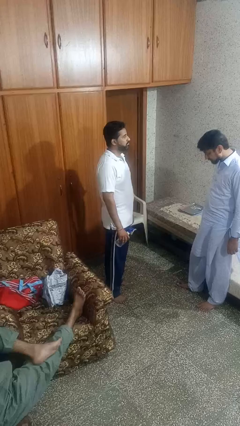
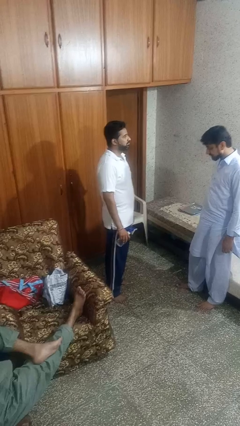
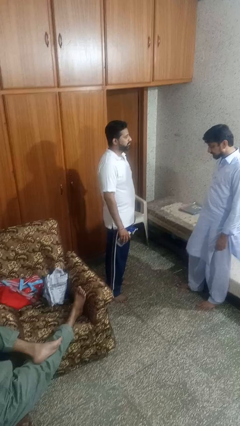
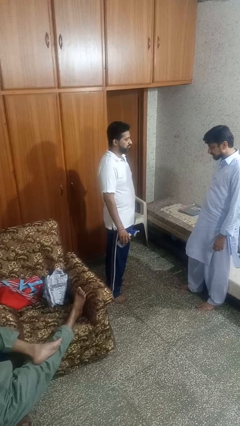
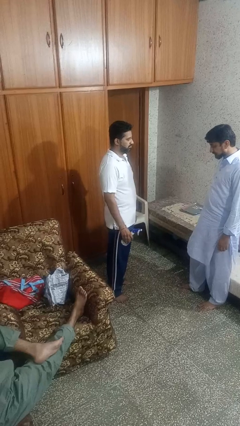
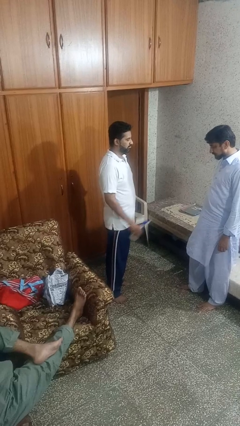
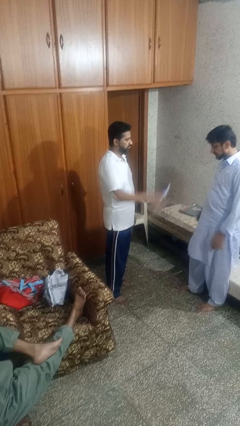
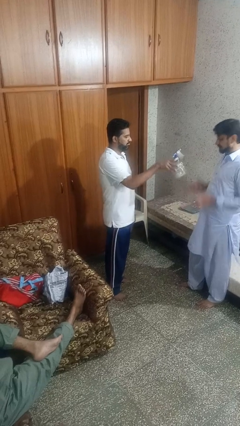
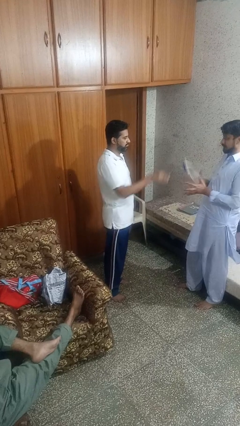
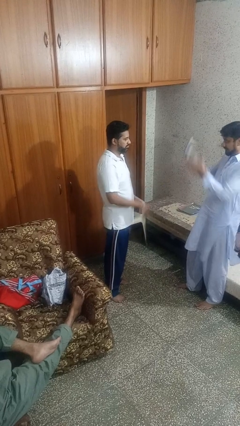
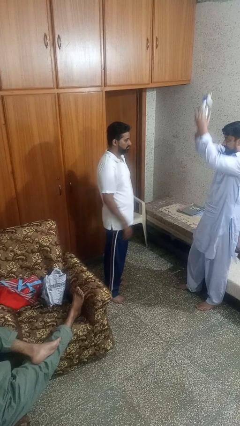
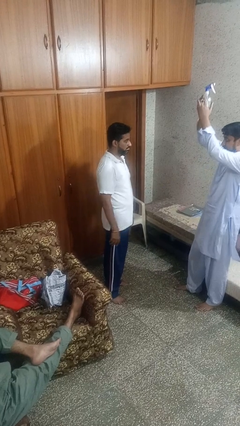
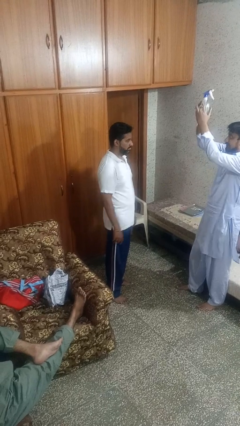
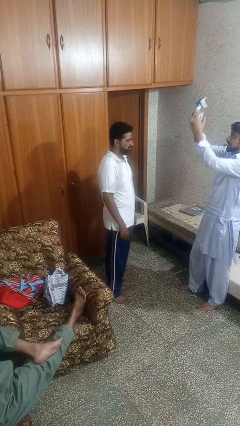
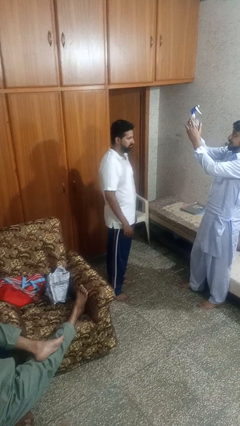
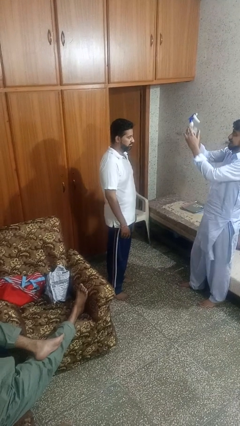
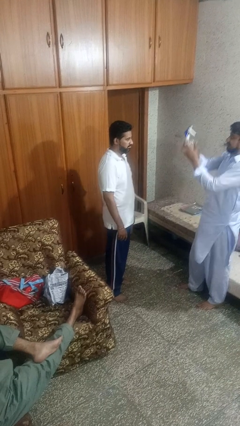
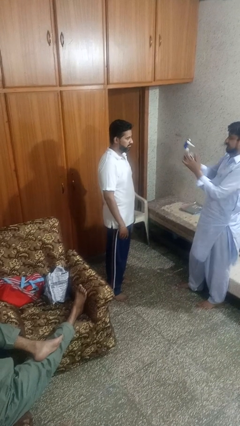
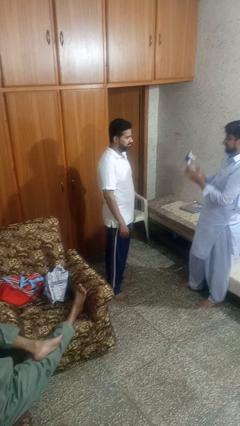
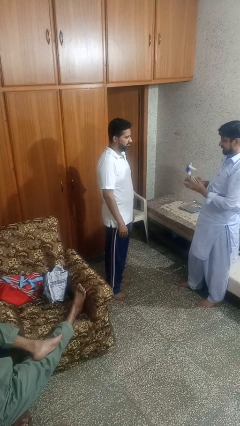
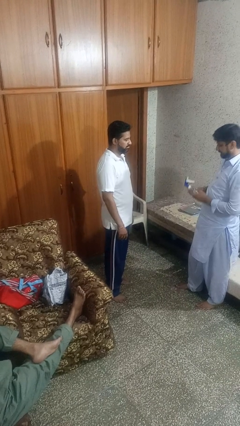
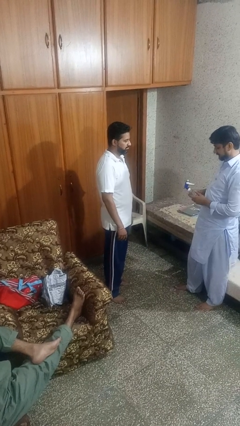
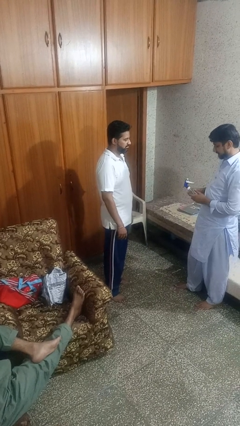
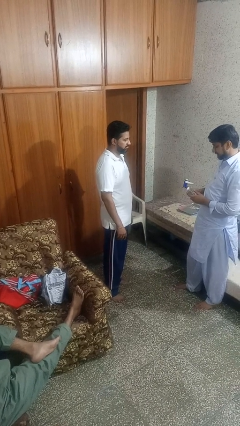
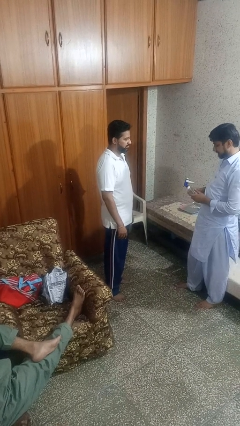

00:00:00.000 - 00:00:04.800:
person throws object to person

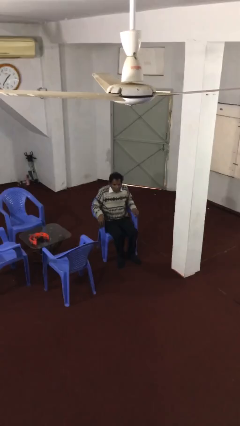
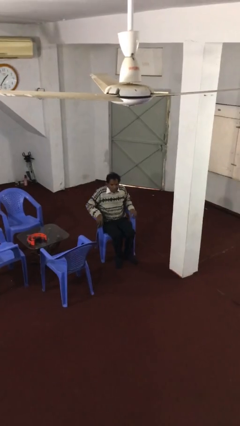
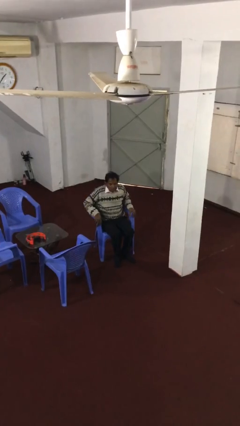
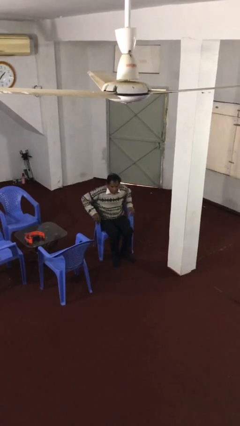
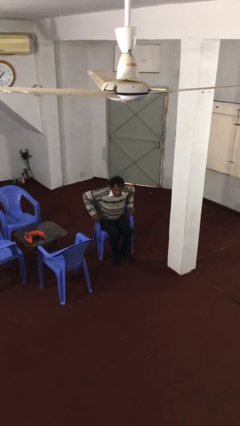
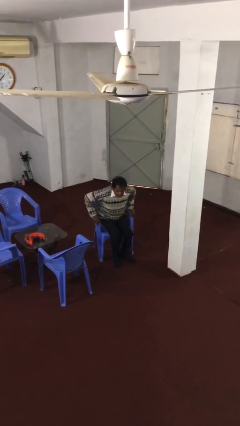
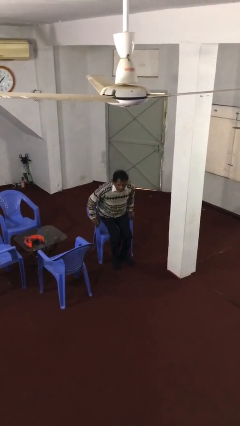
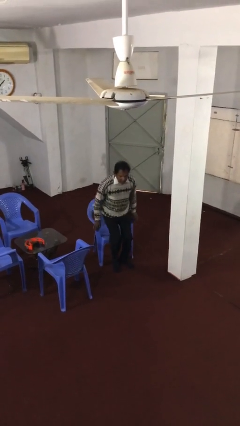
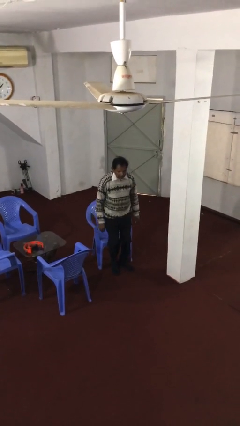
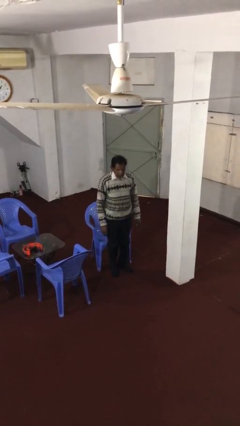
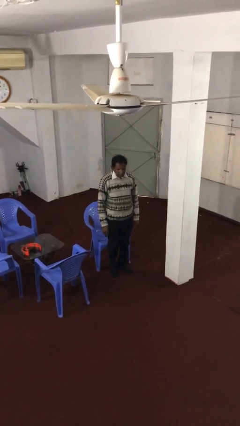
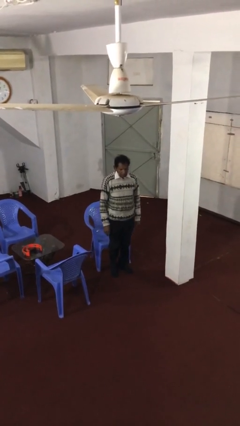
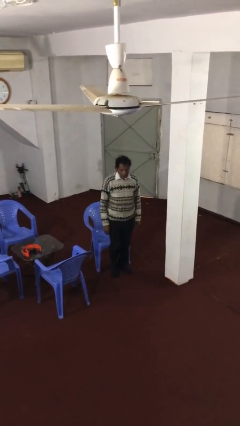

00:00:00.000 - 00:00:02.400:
person stands up

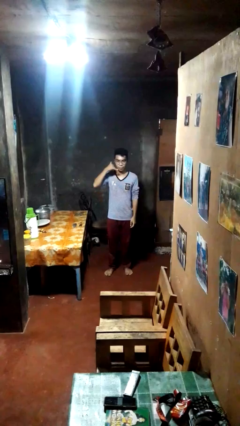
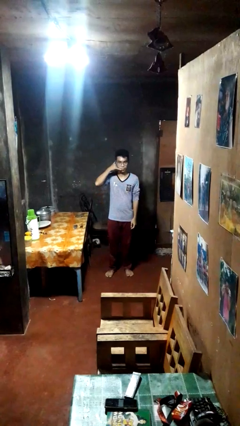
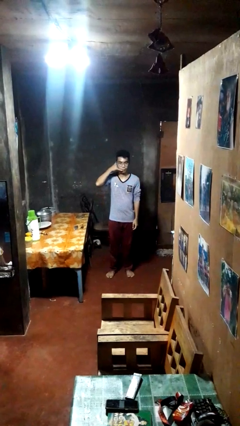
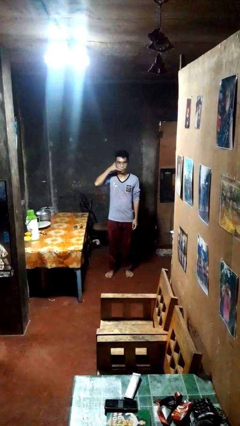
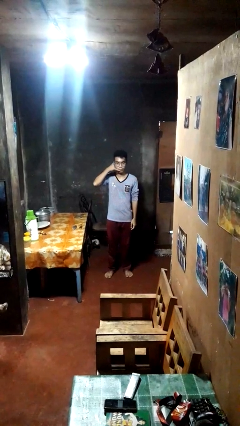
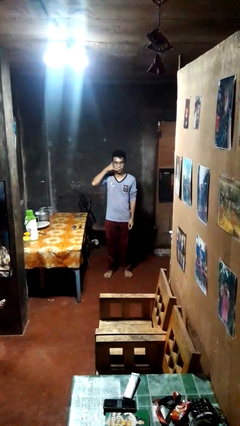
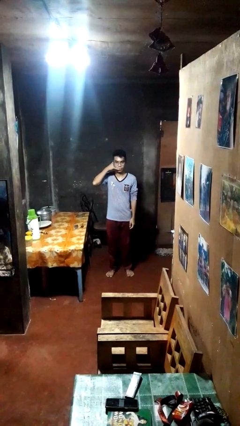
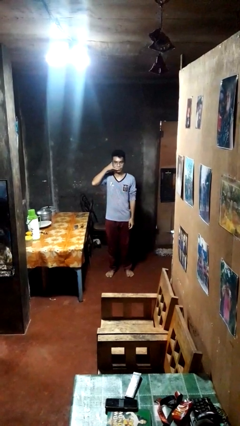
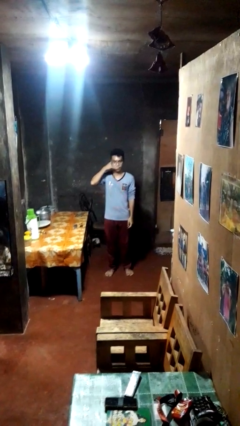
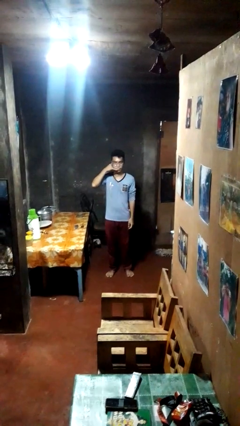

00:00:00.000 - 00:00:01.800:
person gestures call me

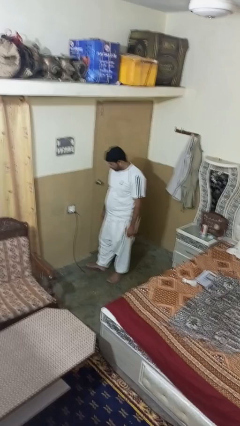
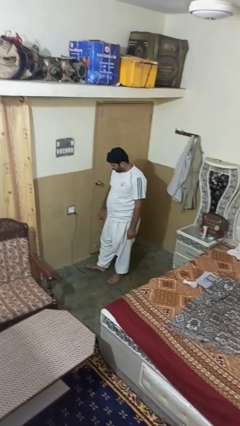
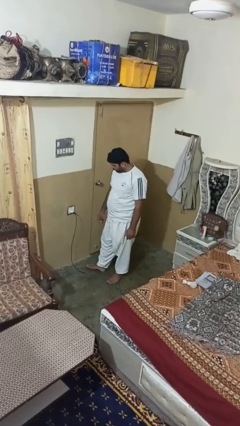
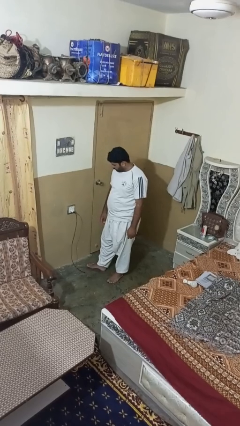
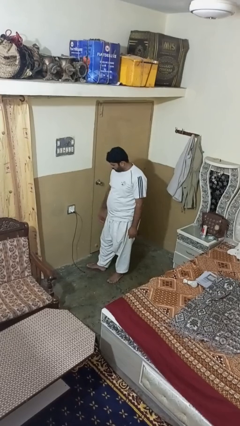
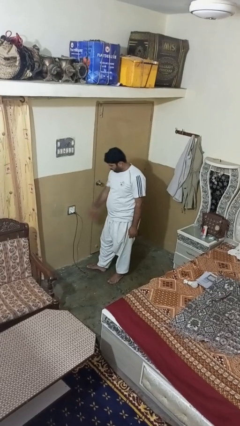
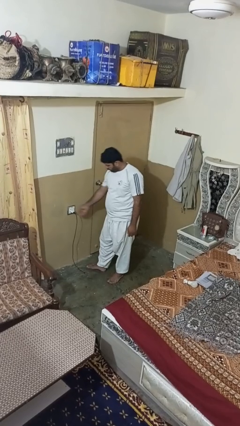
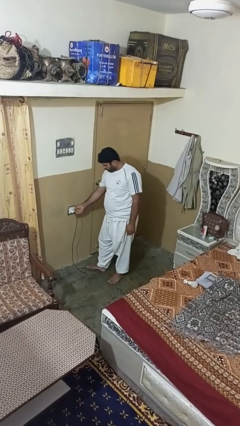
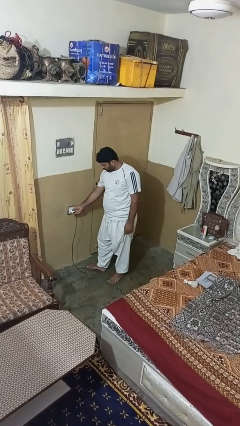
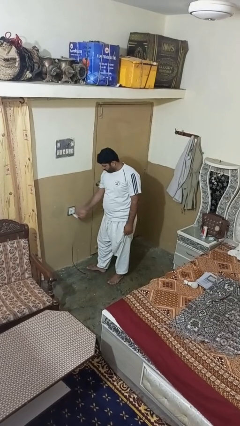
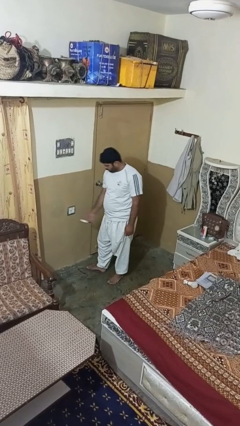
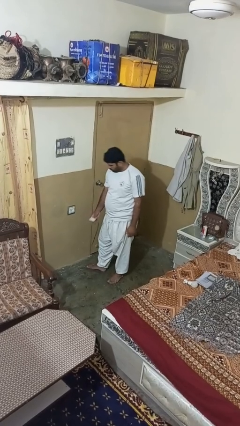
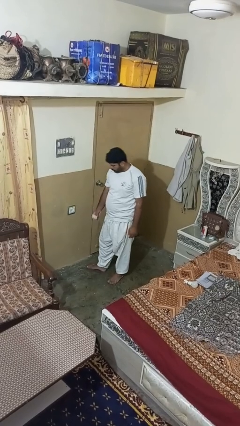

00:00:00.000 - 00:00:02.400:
person unplugs from electrical socket

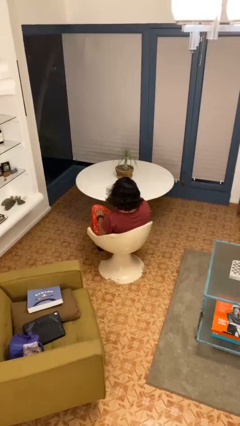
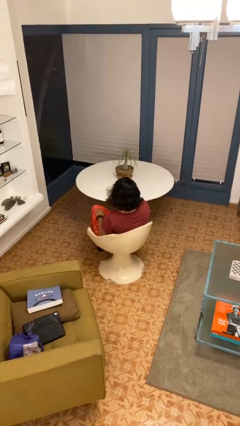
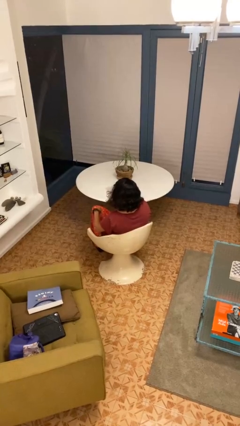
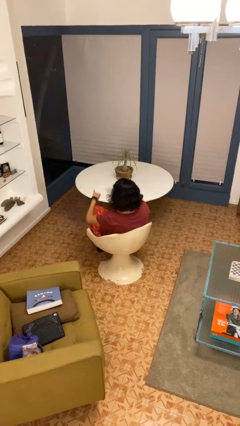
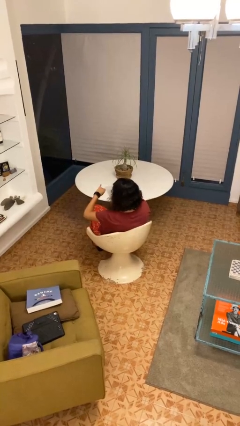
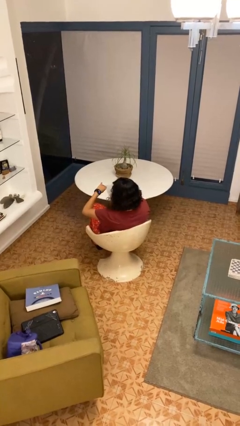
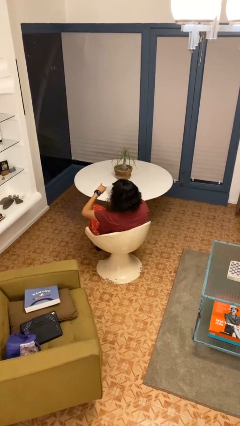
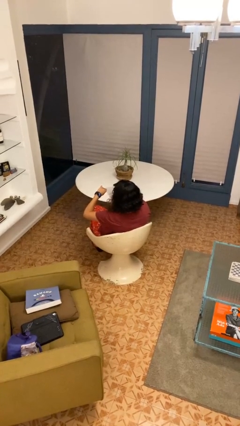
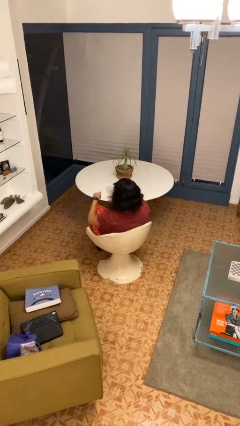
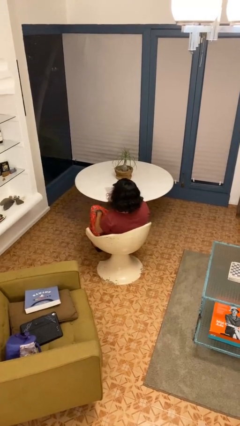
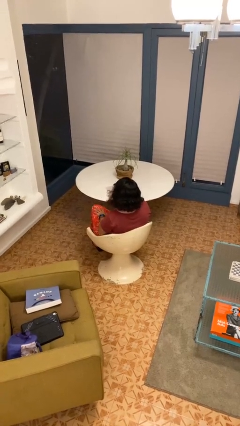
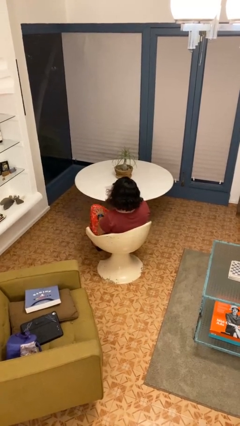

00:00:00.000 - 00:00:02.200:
person looks at wristwatch

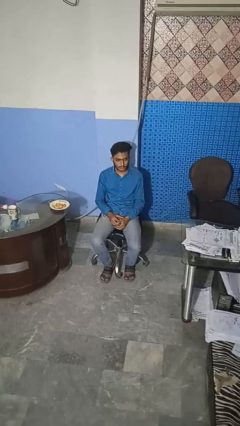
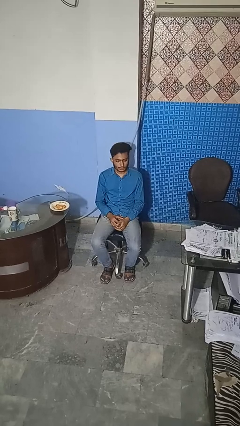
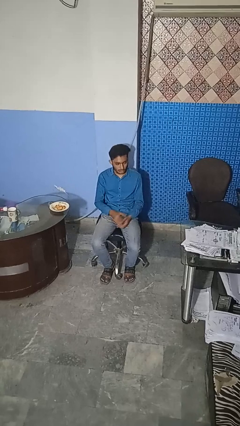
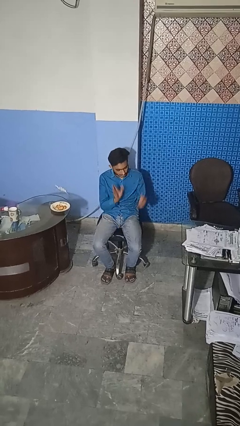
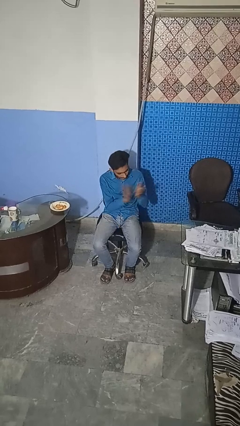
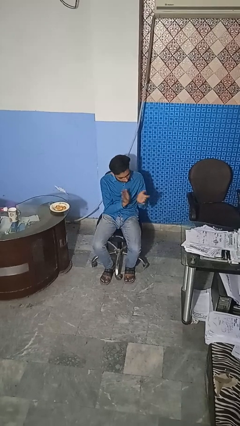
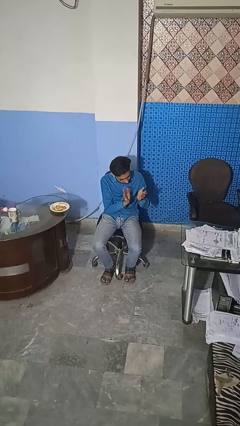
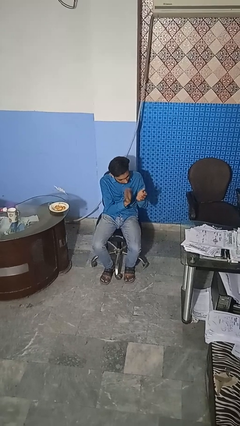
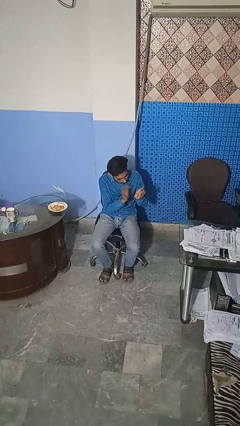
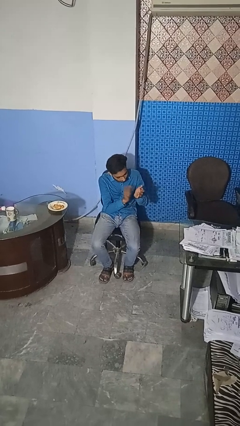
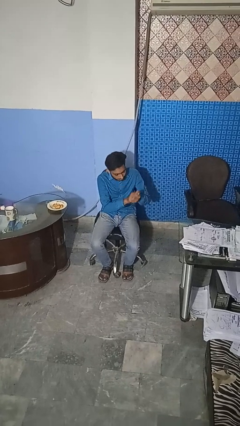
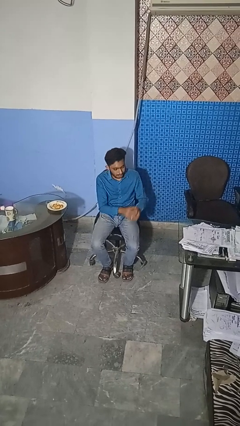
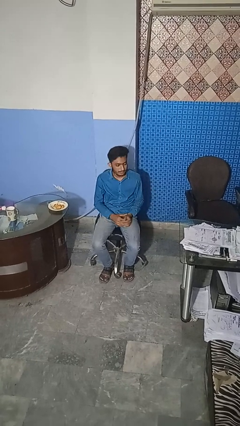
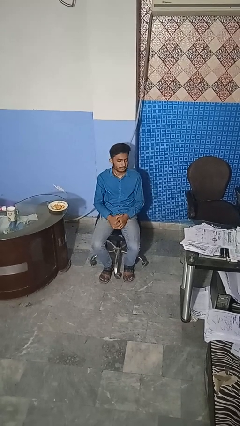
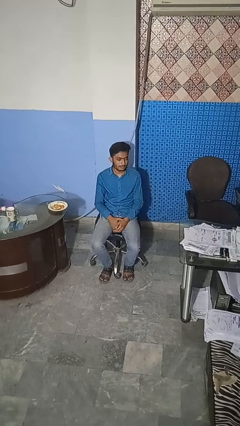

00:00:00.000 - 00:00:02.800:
person claps hands

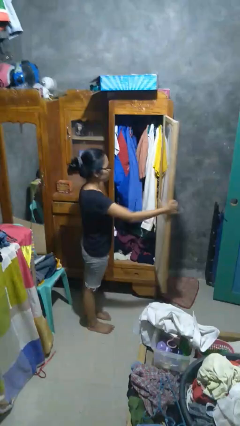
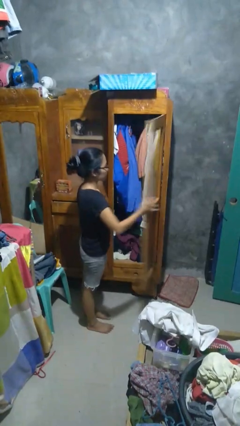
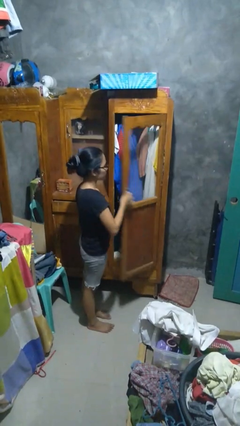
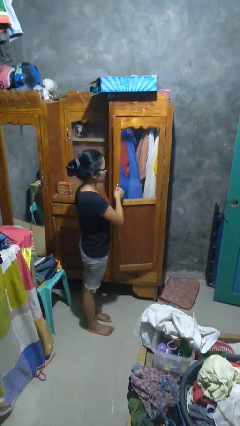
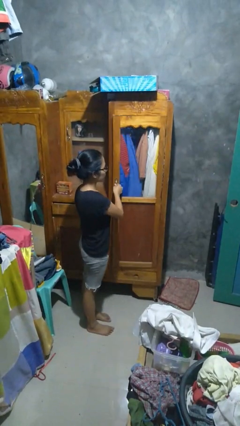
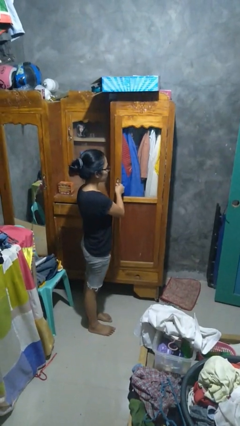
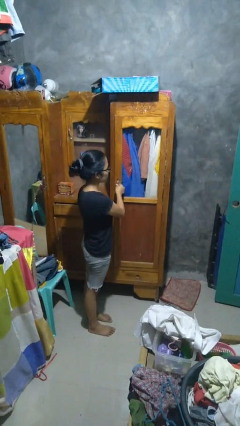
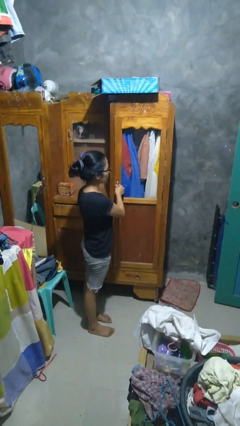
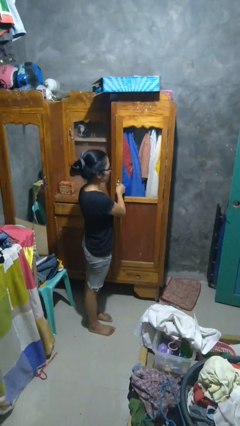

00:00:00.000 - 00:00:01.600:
person closes closet door
